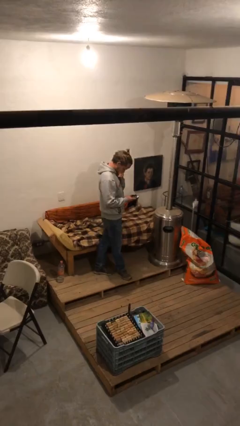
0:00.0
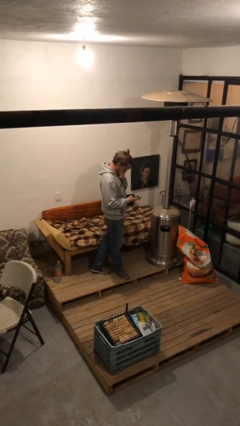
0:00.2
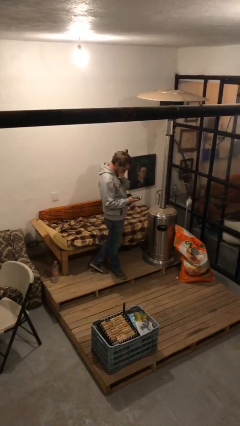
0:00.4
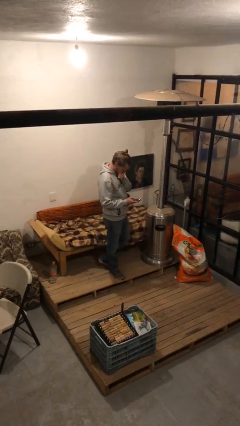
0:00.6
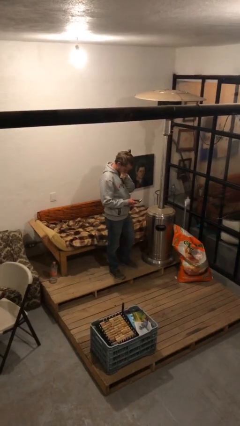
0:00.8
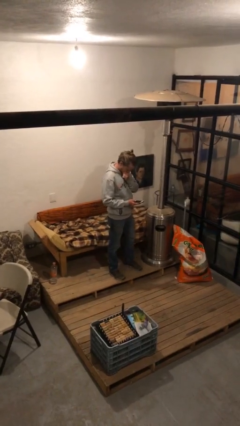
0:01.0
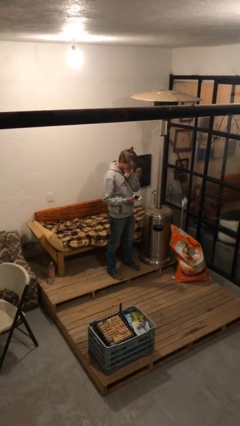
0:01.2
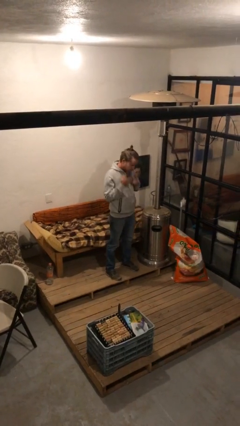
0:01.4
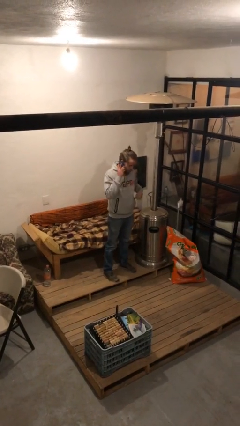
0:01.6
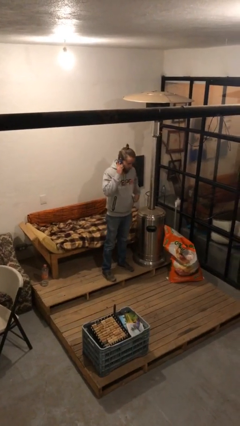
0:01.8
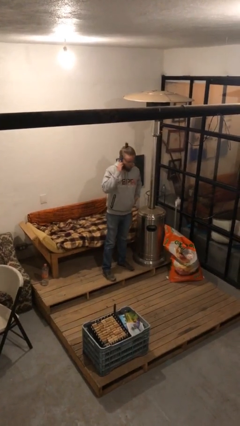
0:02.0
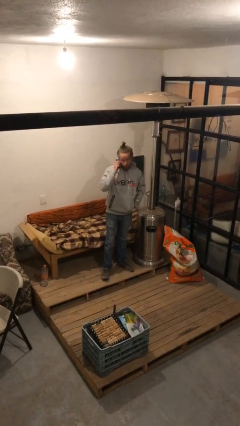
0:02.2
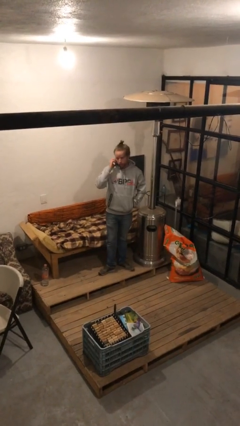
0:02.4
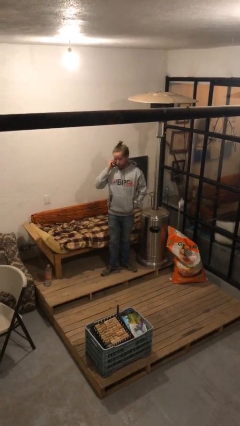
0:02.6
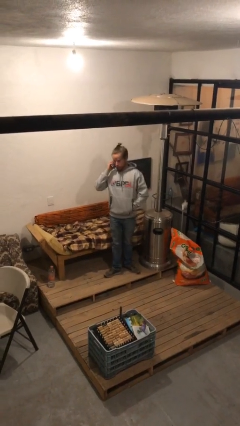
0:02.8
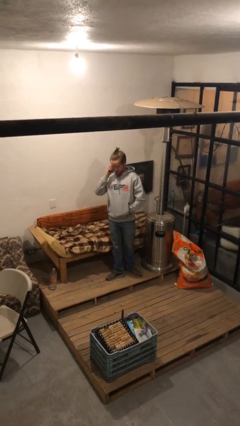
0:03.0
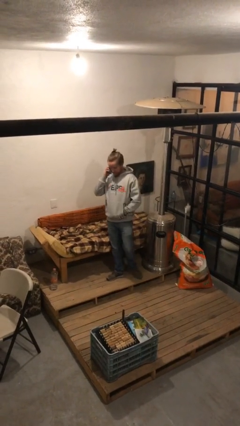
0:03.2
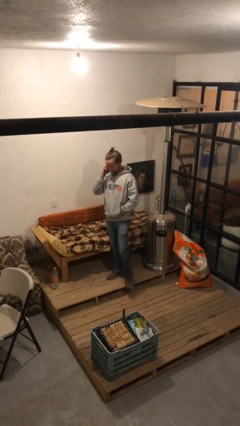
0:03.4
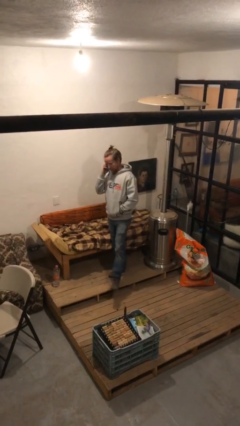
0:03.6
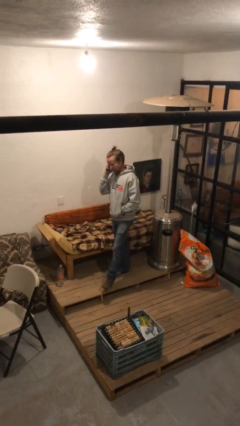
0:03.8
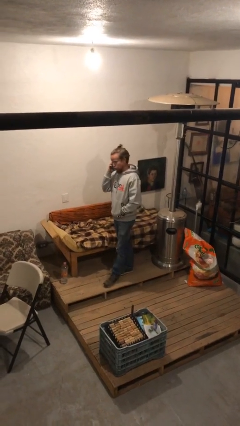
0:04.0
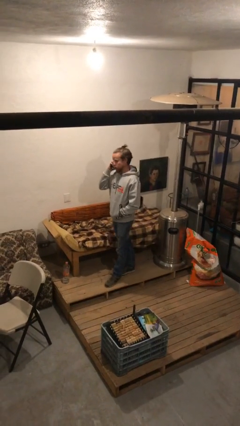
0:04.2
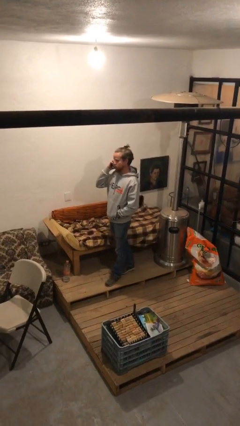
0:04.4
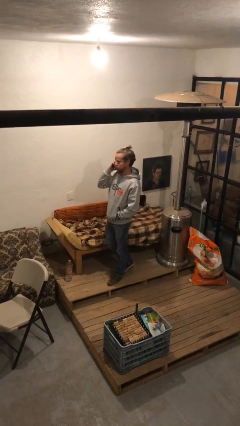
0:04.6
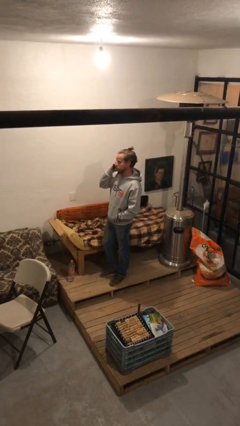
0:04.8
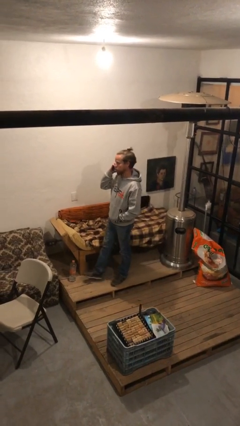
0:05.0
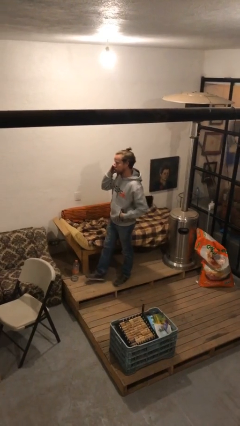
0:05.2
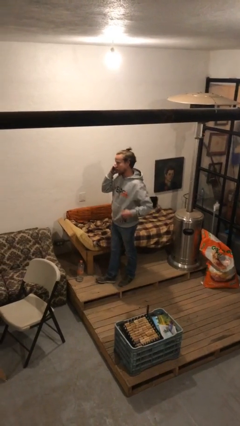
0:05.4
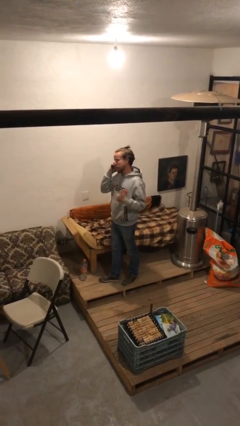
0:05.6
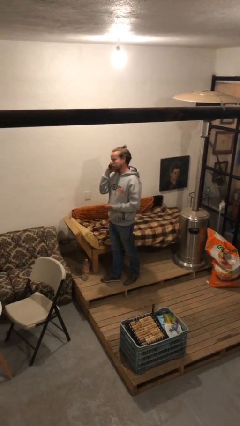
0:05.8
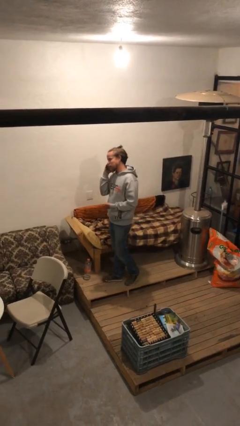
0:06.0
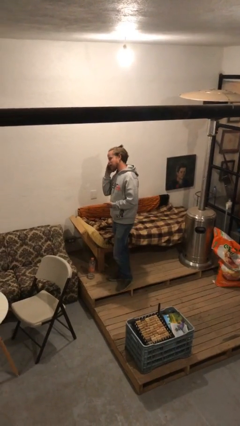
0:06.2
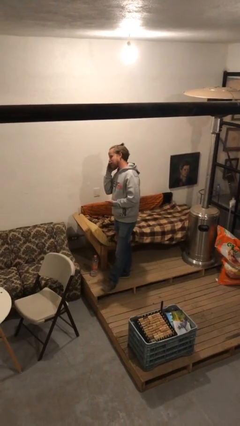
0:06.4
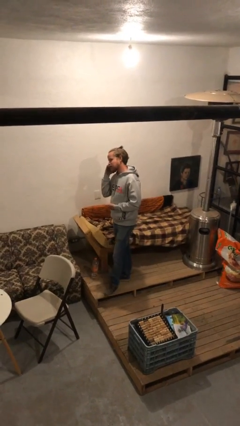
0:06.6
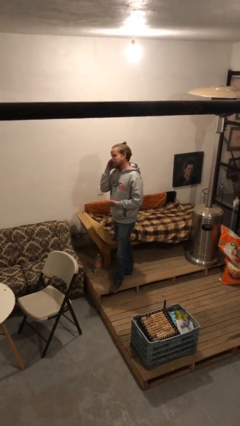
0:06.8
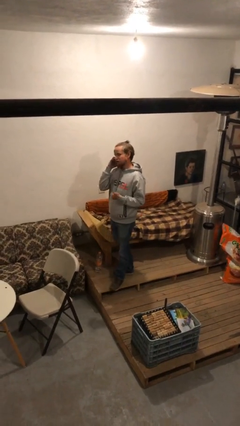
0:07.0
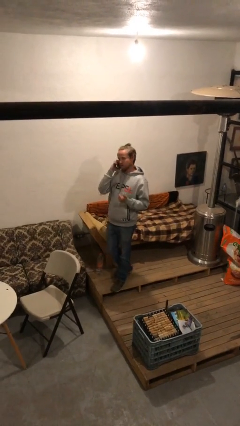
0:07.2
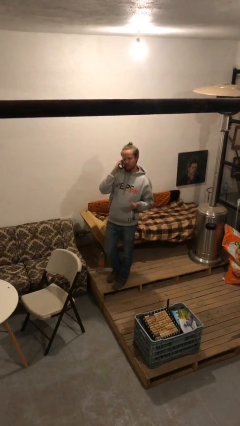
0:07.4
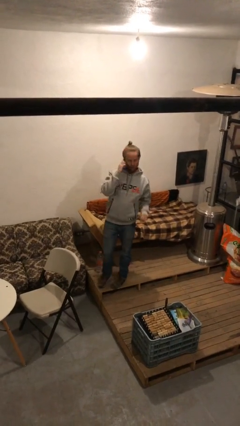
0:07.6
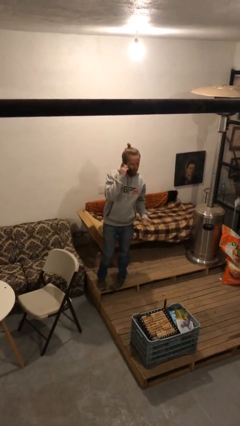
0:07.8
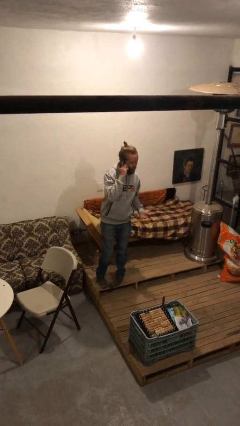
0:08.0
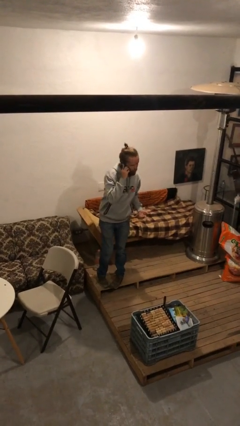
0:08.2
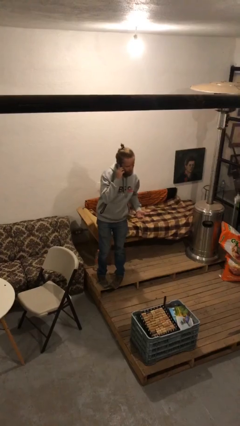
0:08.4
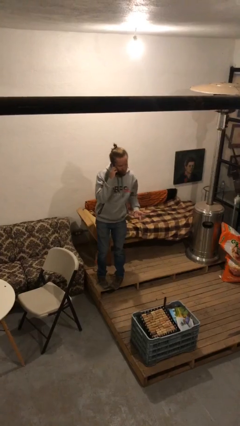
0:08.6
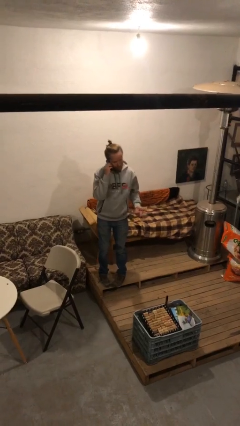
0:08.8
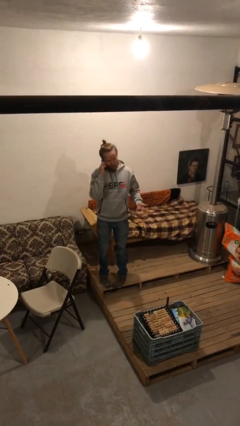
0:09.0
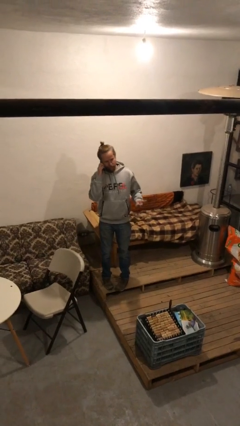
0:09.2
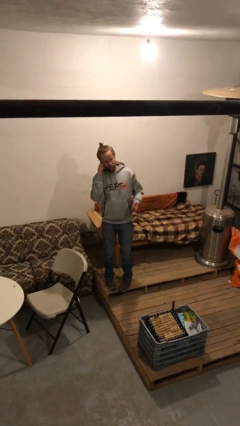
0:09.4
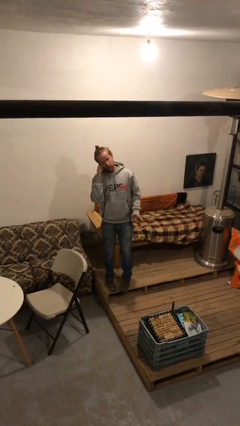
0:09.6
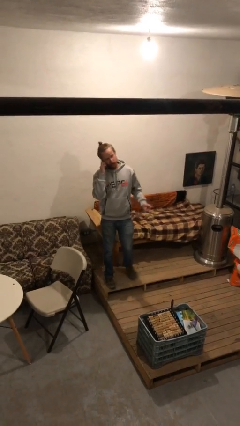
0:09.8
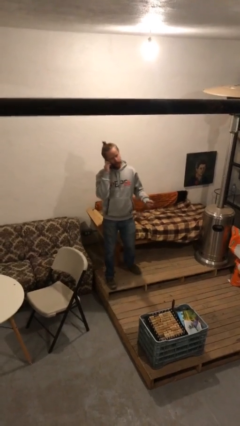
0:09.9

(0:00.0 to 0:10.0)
person talks on phone

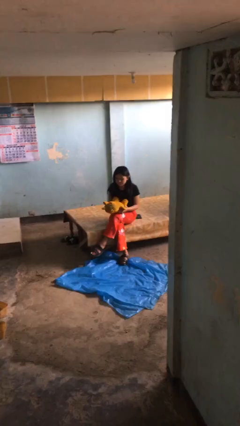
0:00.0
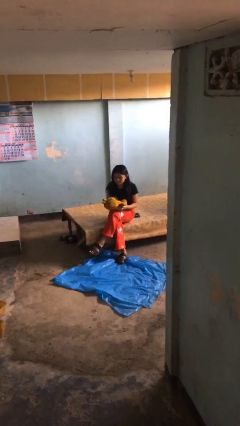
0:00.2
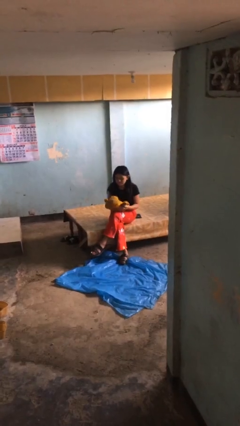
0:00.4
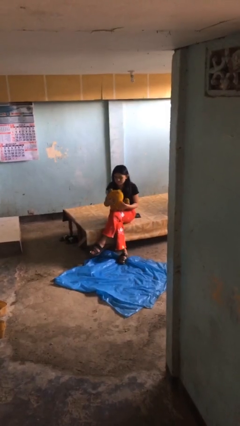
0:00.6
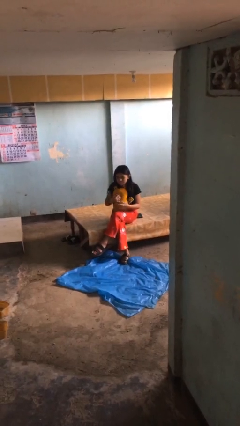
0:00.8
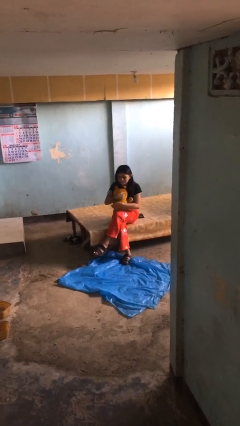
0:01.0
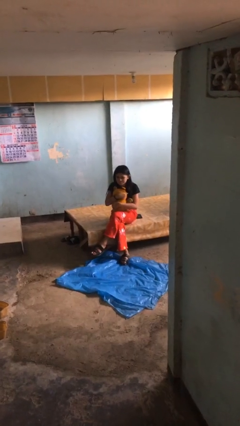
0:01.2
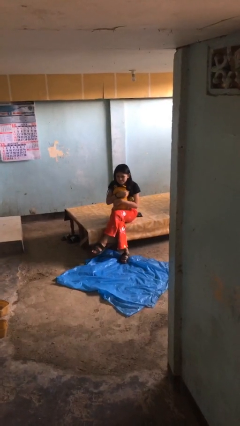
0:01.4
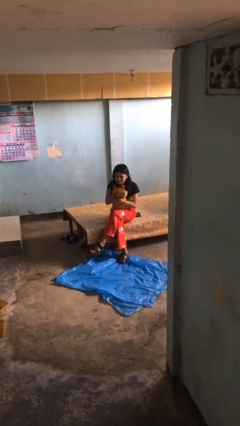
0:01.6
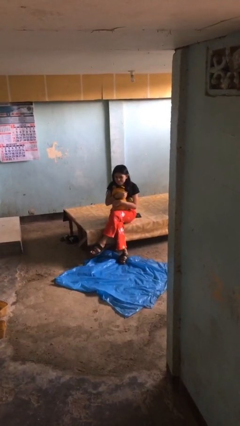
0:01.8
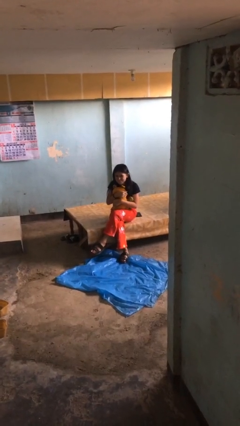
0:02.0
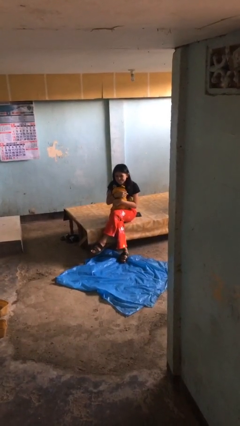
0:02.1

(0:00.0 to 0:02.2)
person hugs stuffed animal

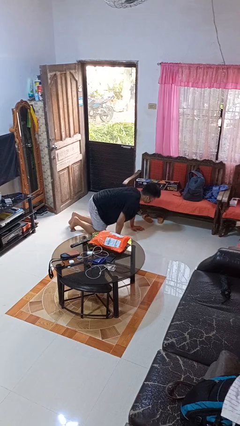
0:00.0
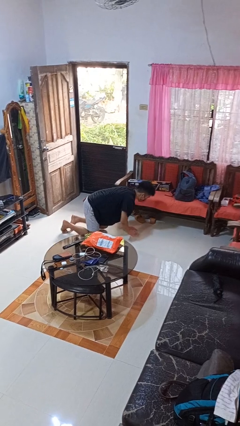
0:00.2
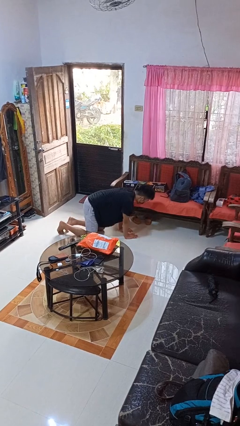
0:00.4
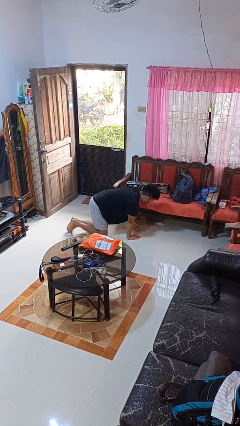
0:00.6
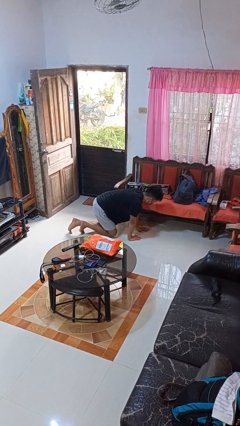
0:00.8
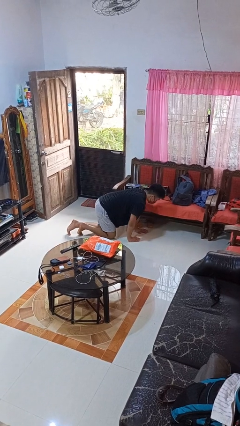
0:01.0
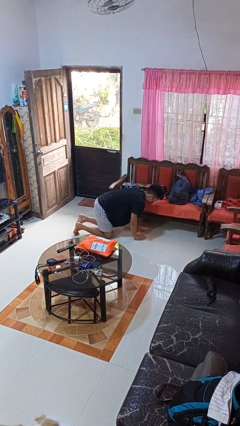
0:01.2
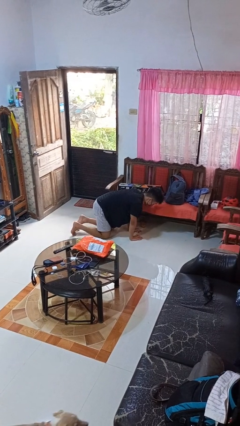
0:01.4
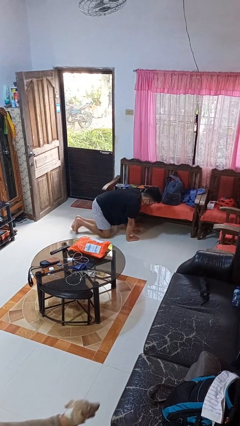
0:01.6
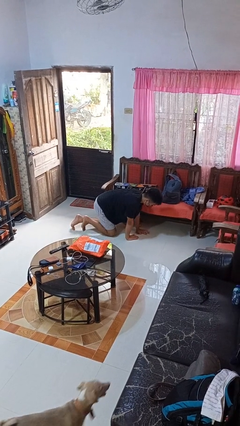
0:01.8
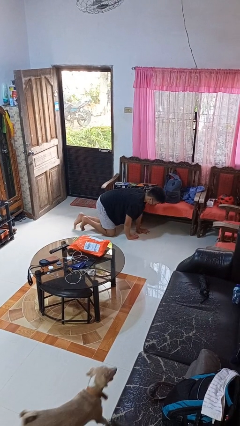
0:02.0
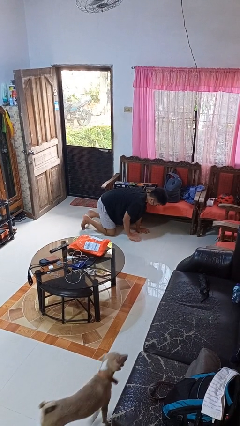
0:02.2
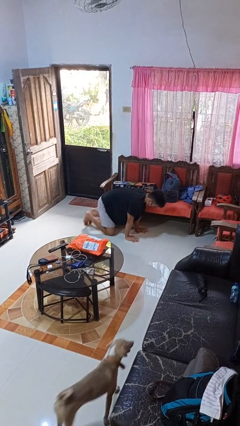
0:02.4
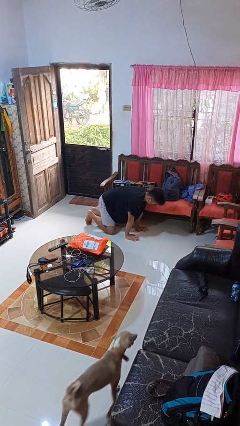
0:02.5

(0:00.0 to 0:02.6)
person crawls

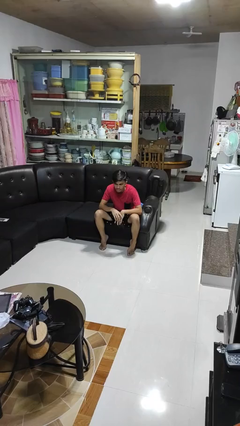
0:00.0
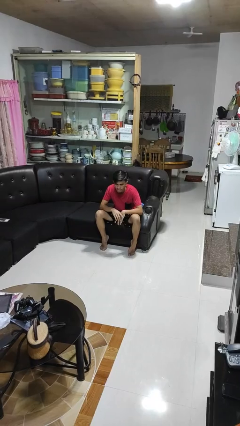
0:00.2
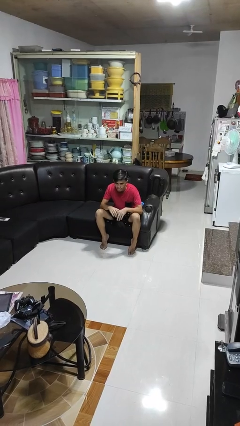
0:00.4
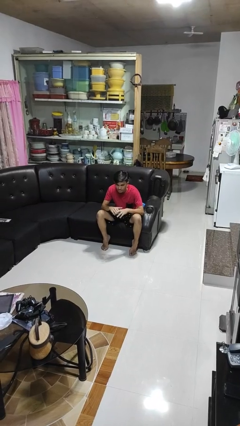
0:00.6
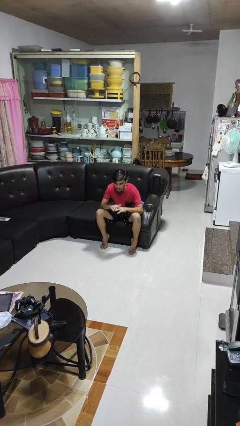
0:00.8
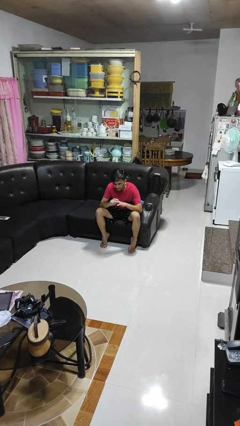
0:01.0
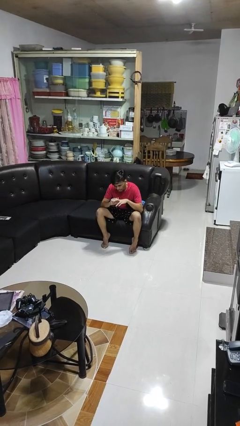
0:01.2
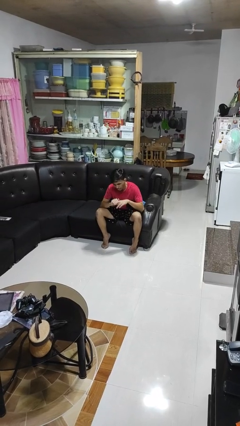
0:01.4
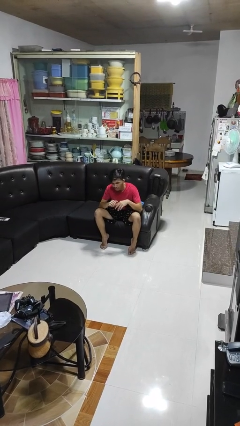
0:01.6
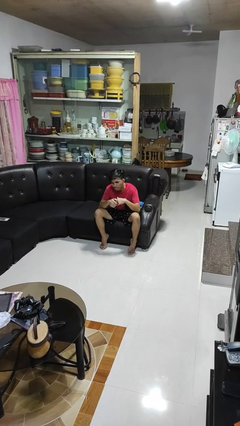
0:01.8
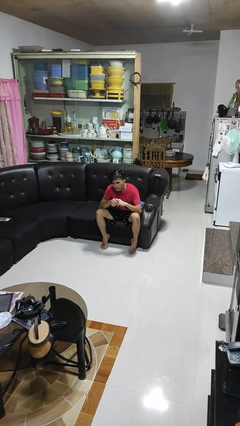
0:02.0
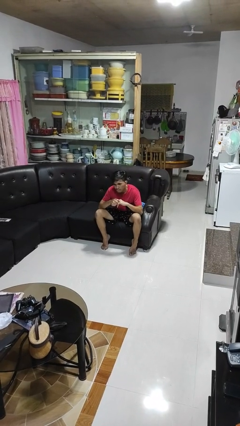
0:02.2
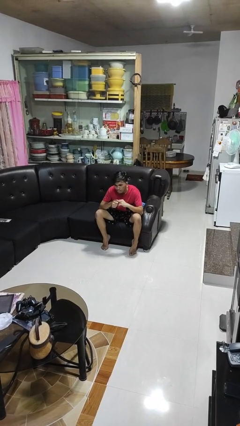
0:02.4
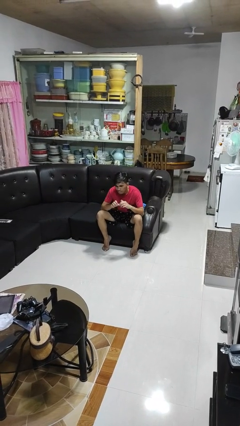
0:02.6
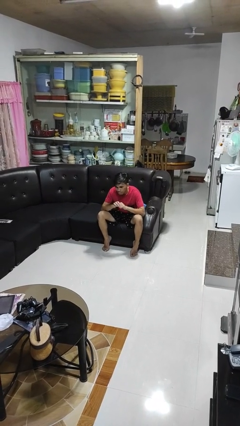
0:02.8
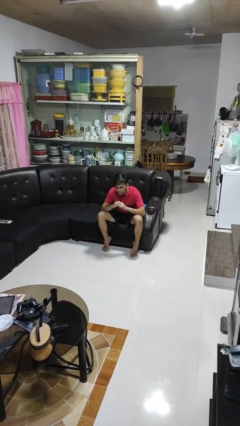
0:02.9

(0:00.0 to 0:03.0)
person cracks knuckles

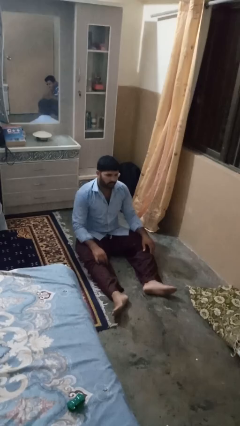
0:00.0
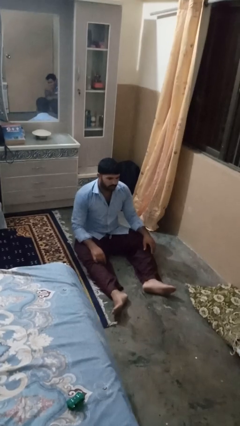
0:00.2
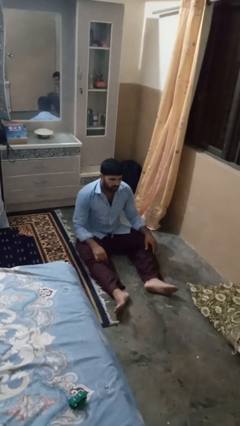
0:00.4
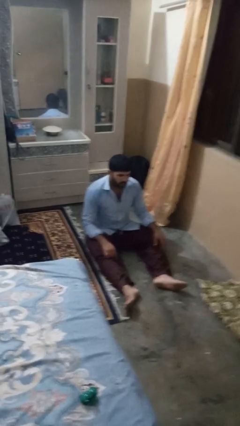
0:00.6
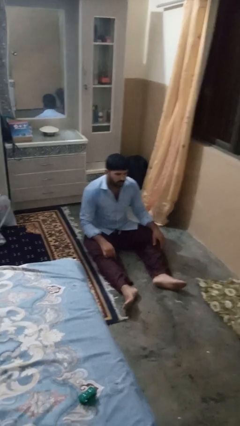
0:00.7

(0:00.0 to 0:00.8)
person crosses legs
